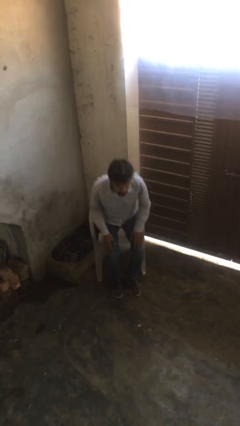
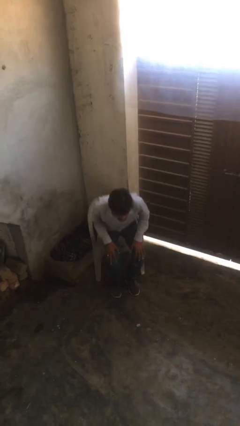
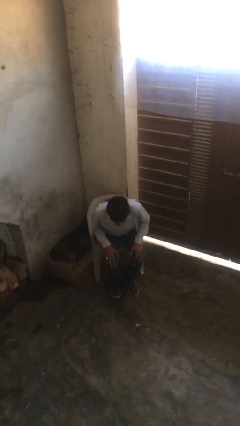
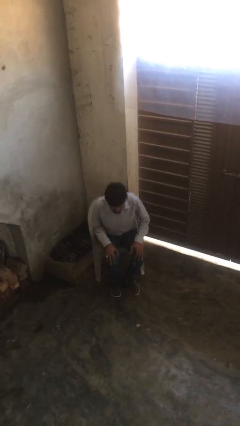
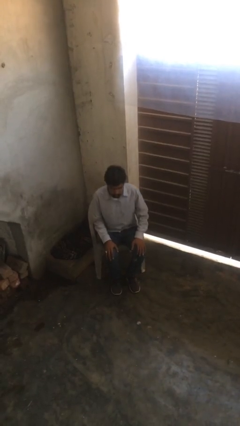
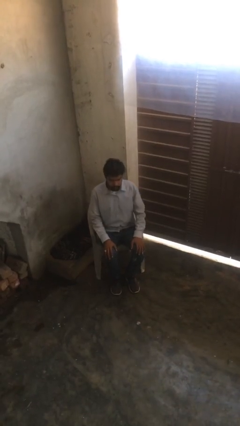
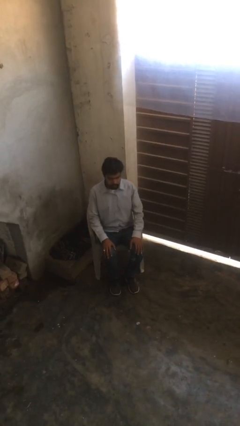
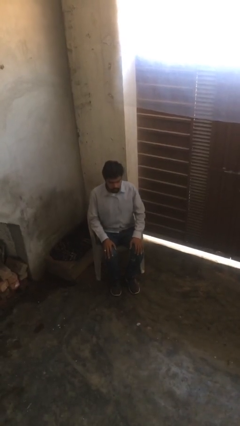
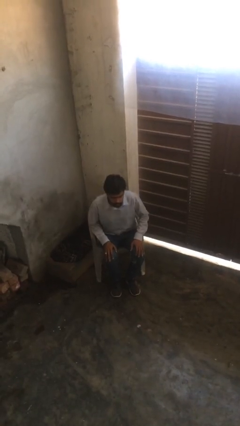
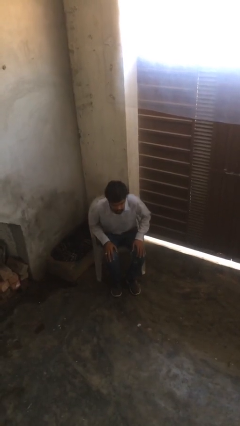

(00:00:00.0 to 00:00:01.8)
person sits down

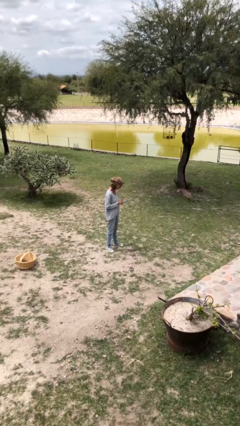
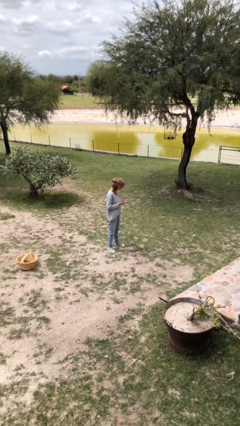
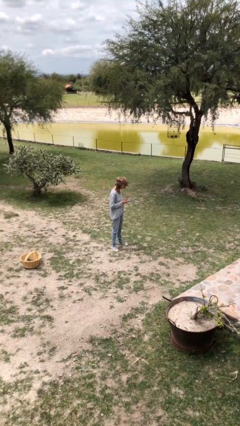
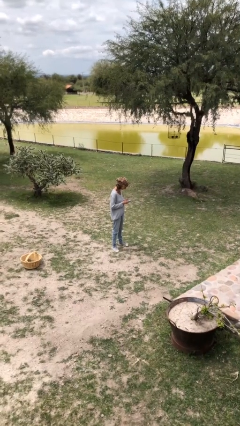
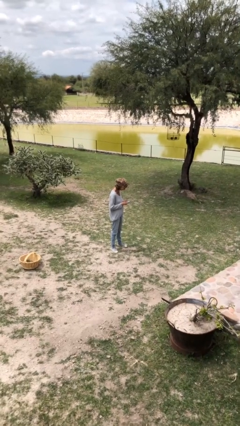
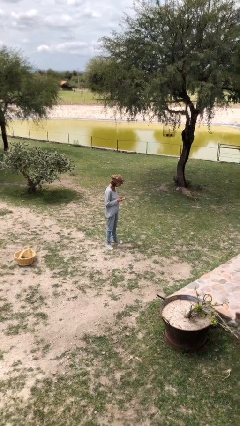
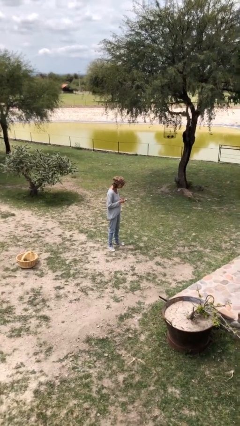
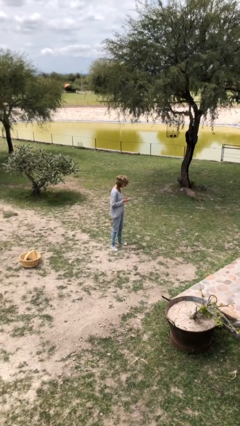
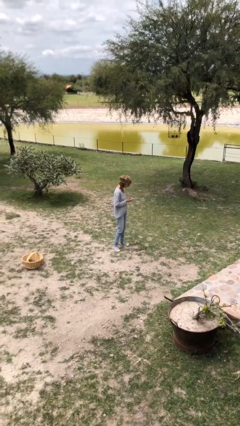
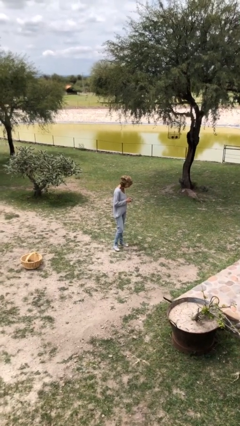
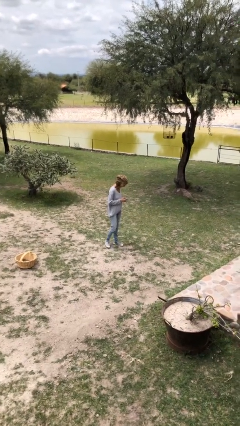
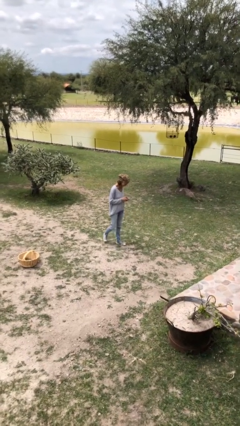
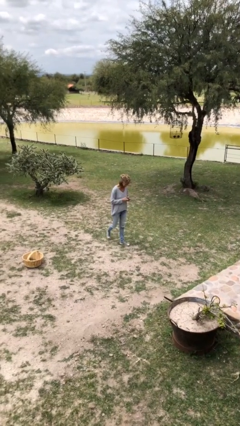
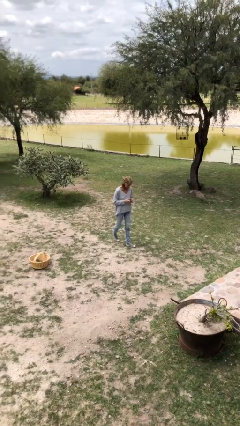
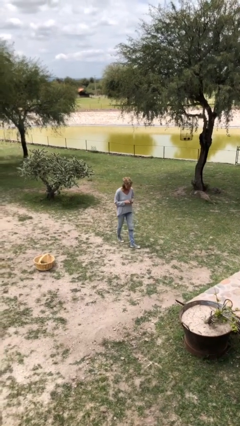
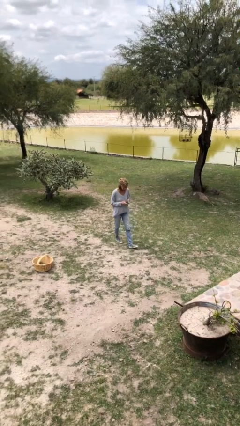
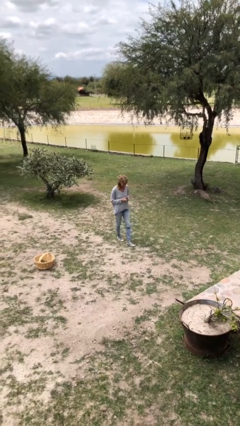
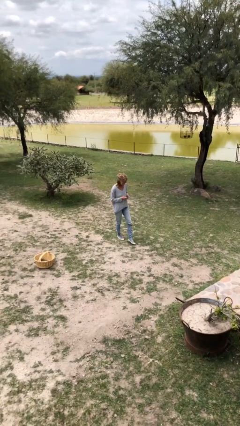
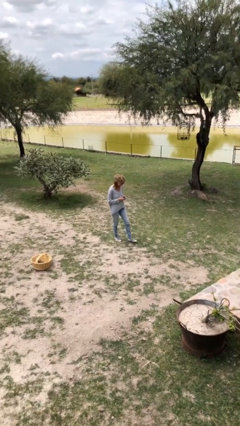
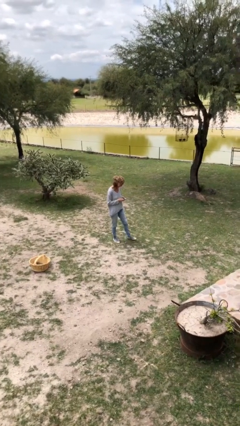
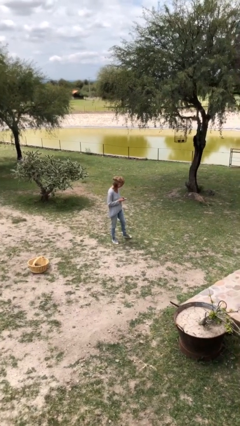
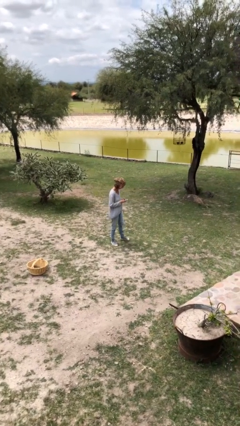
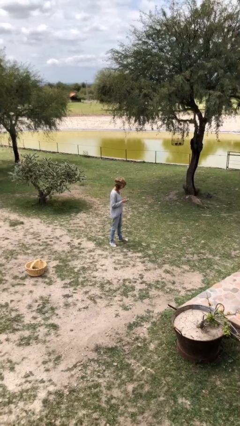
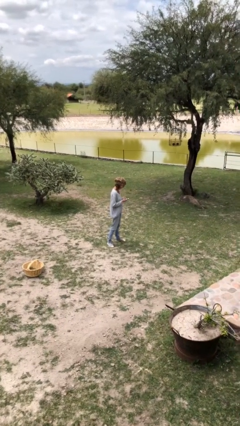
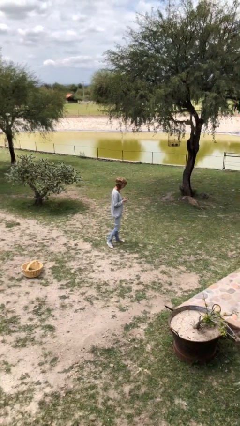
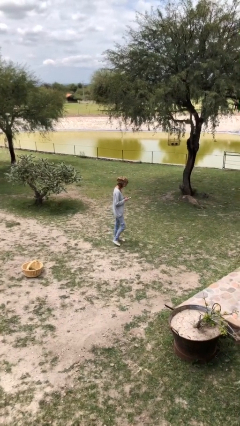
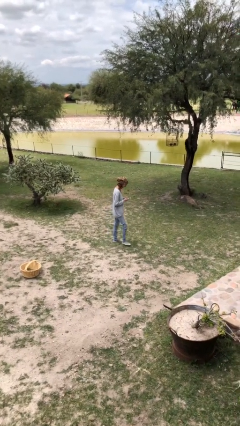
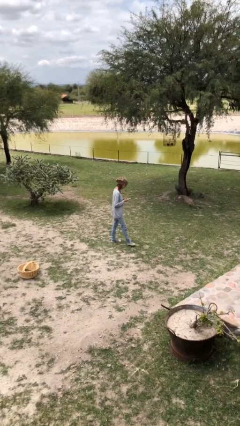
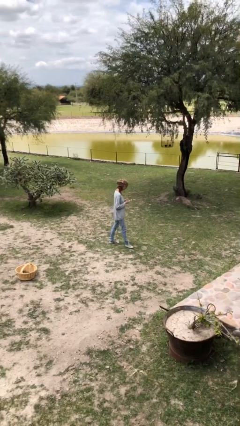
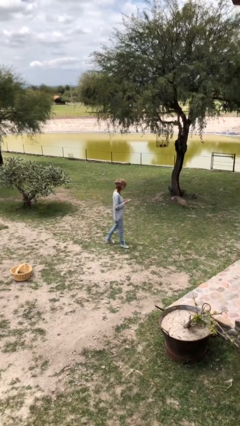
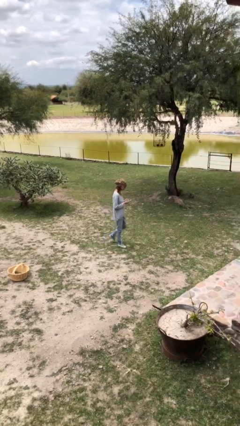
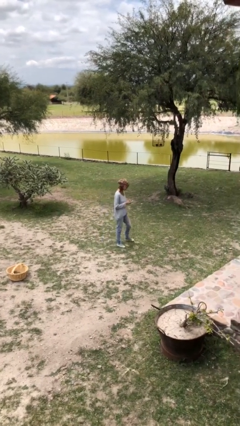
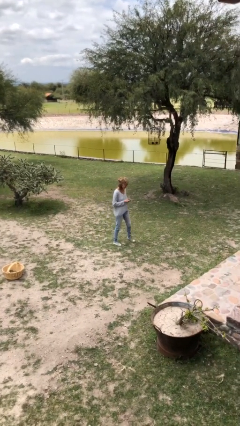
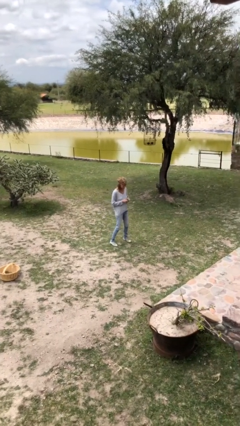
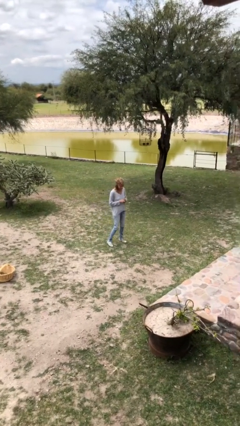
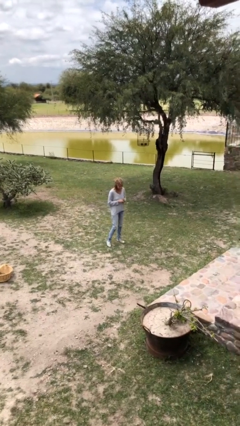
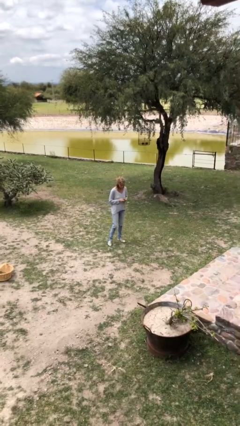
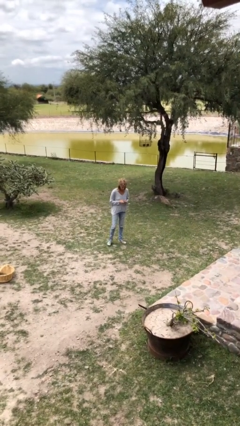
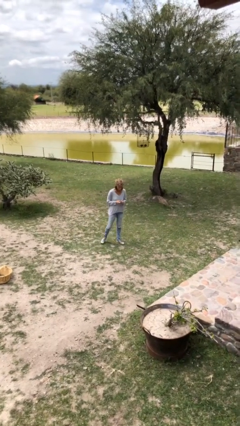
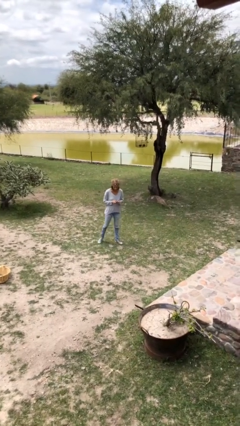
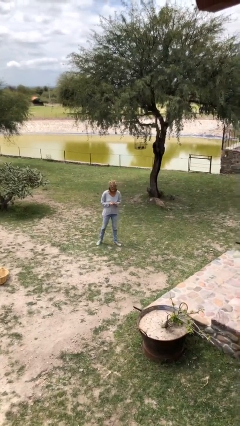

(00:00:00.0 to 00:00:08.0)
person texts on phone

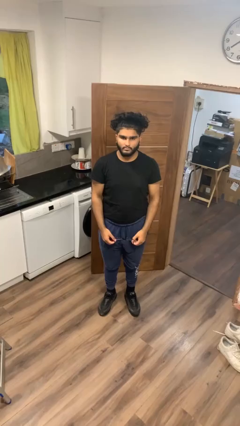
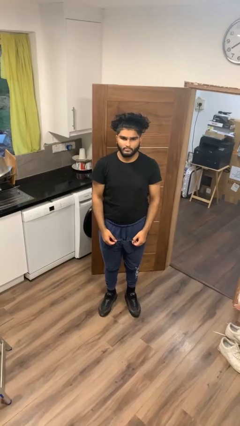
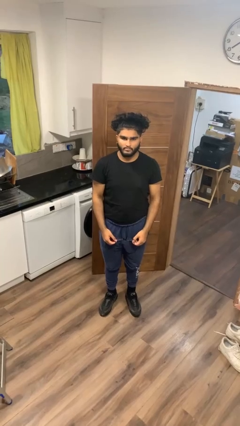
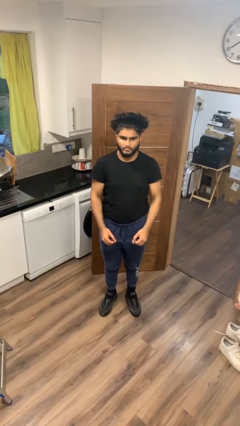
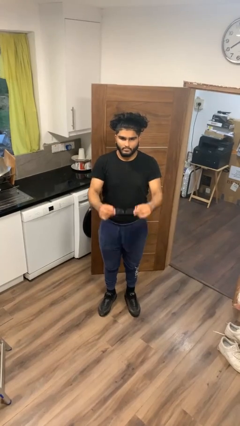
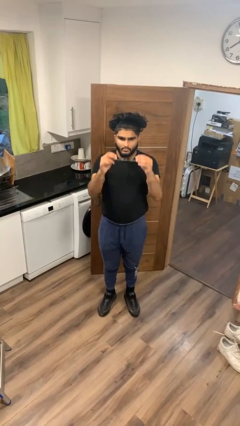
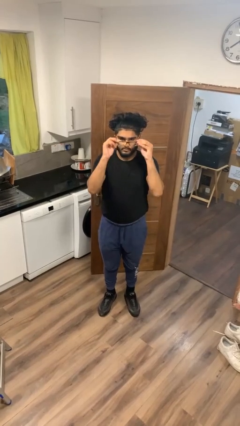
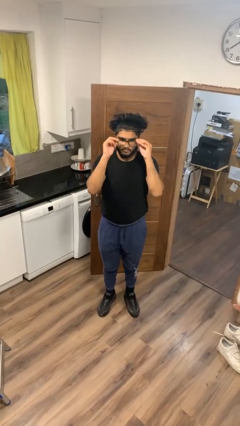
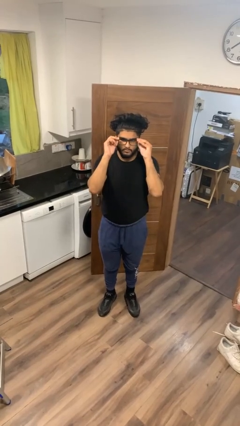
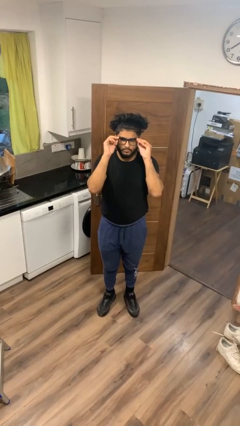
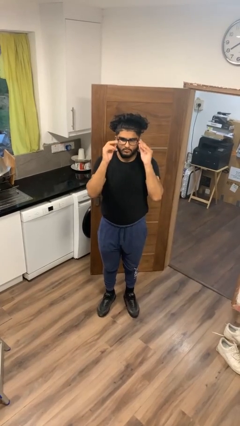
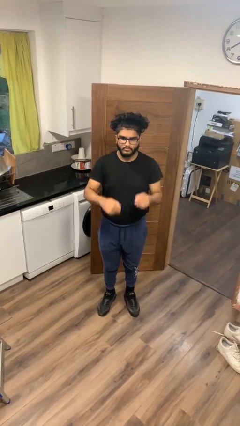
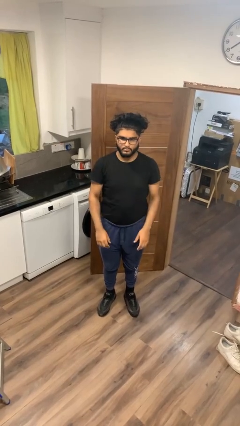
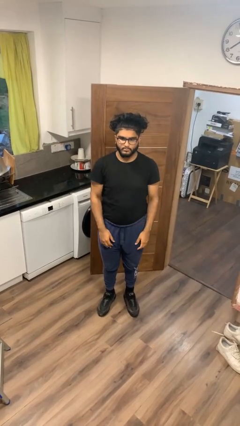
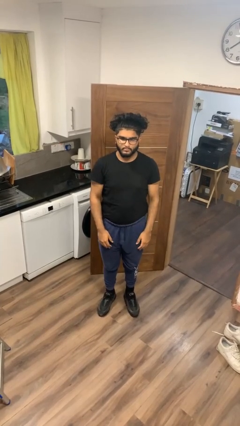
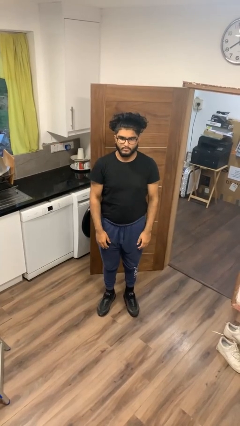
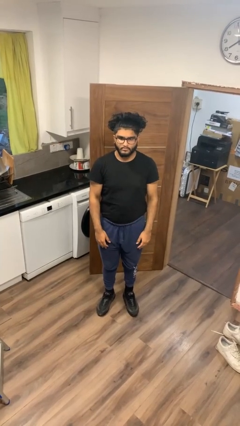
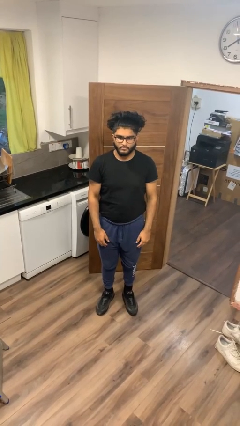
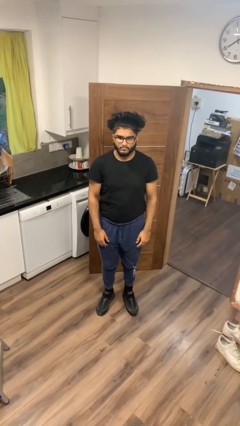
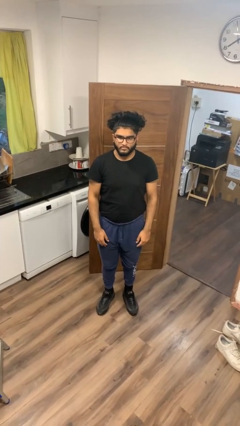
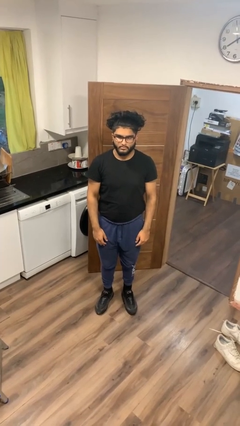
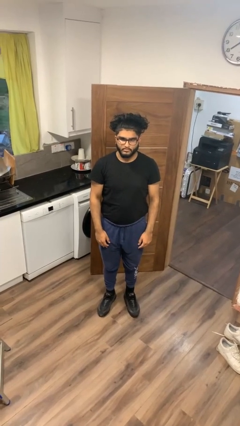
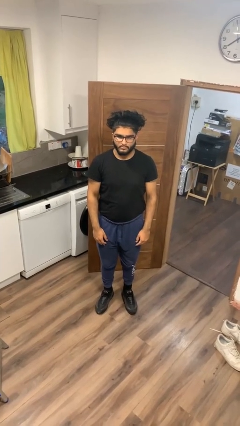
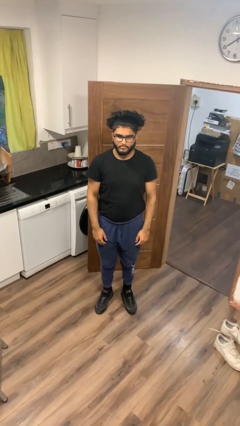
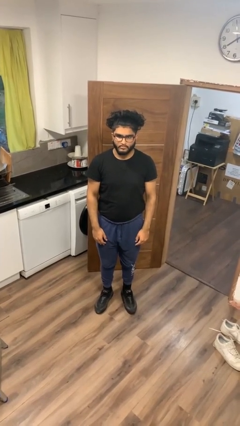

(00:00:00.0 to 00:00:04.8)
person puts on glasses

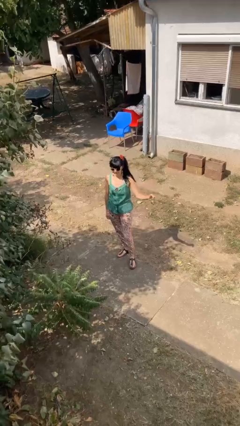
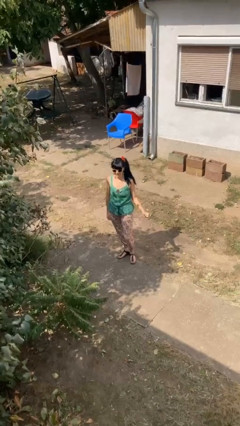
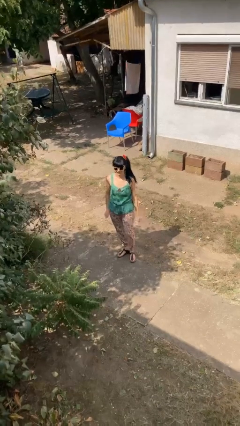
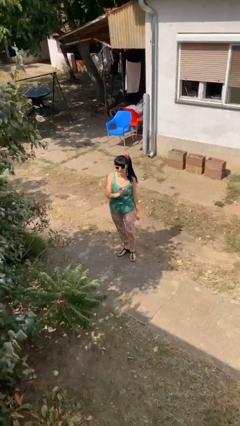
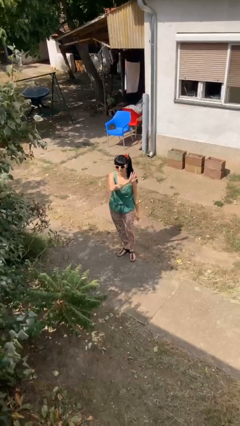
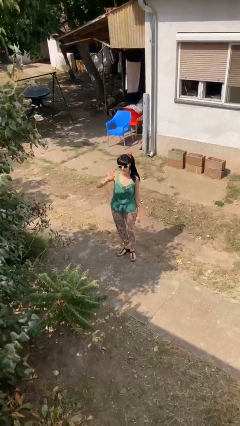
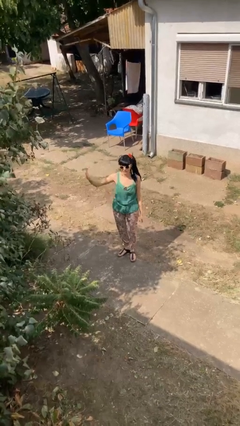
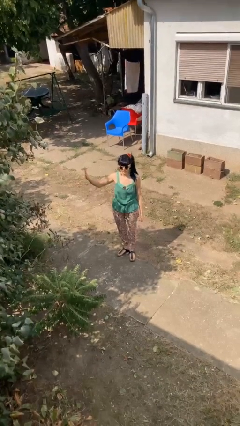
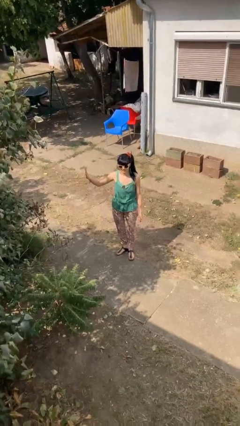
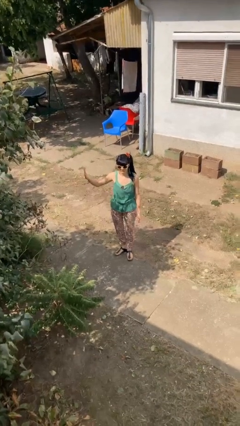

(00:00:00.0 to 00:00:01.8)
person gestures swipe right

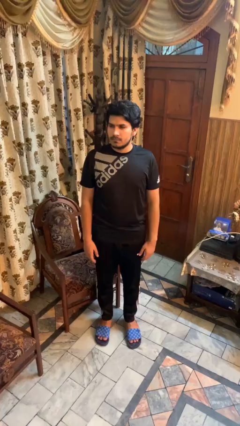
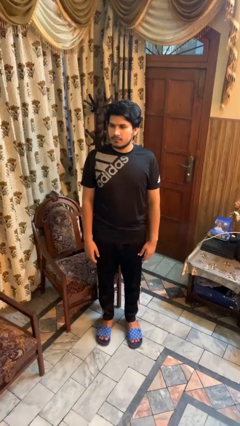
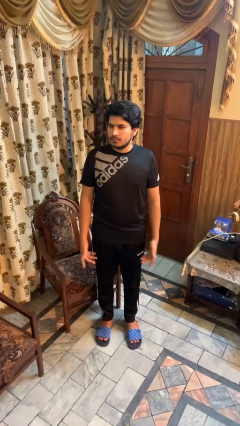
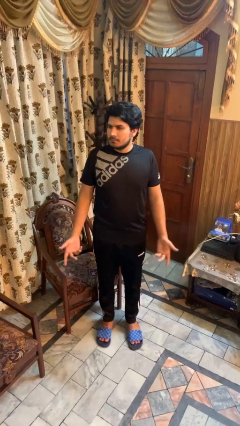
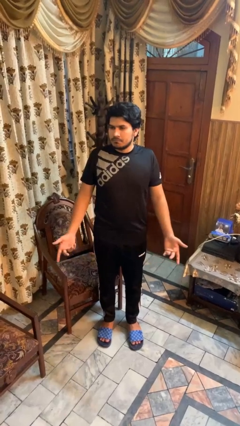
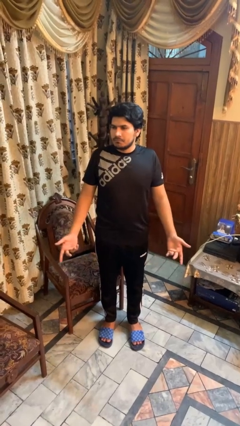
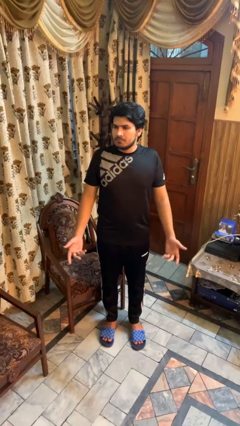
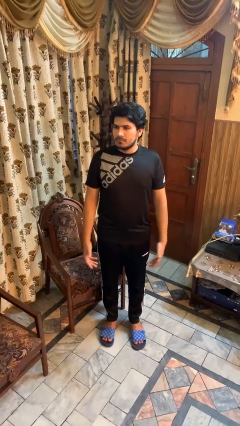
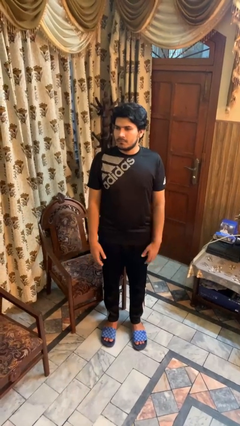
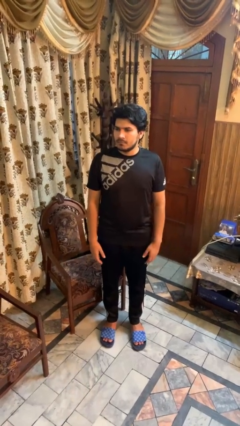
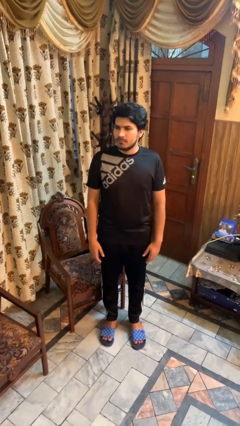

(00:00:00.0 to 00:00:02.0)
person shrugs
